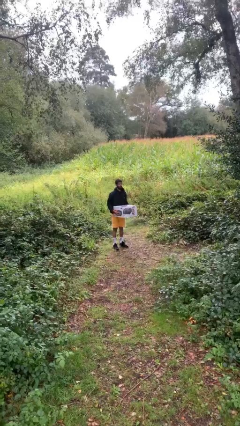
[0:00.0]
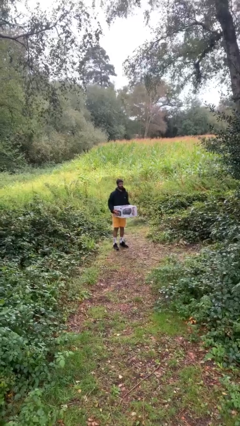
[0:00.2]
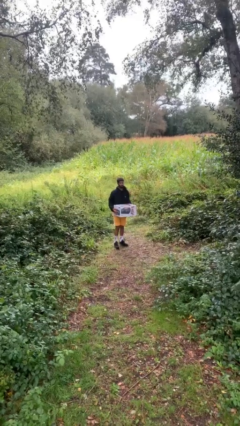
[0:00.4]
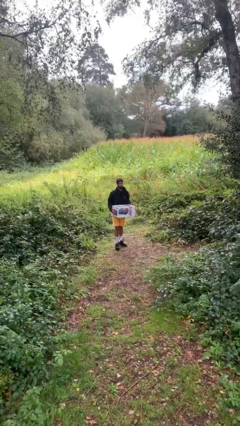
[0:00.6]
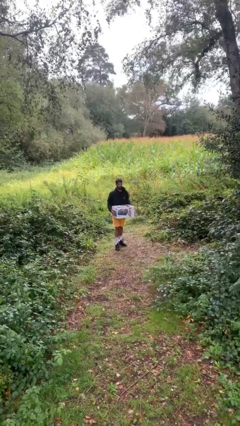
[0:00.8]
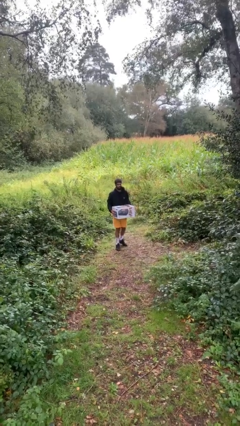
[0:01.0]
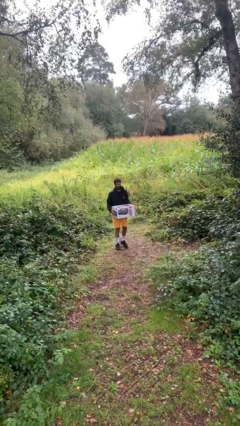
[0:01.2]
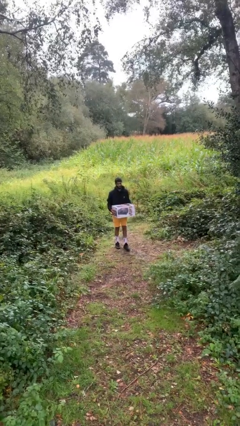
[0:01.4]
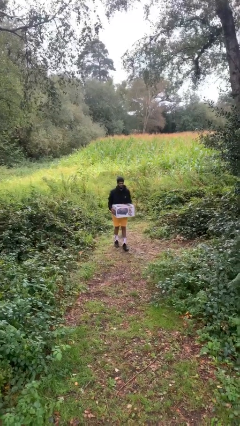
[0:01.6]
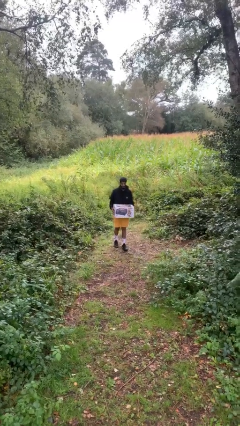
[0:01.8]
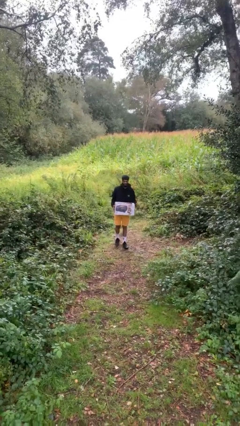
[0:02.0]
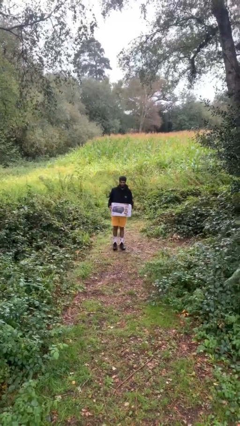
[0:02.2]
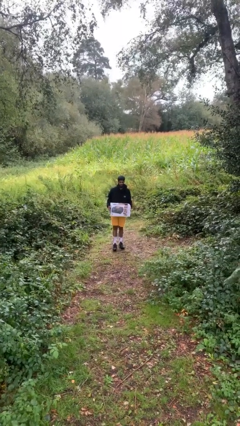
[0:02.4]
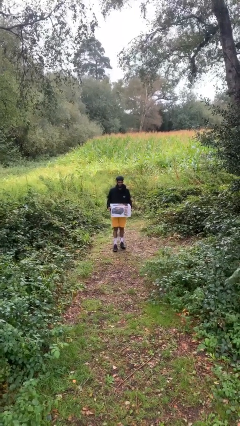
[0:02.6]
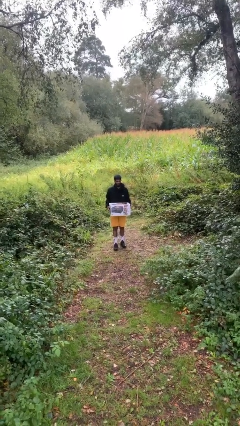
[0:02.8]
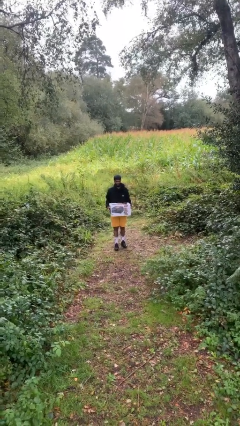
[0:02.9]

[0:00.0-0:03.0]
person carries heavy object

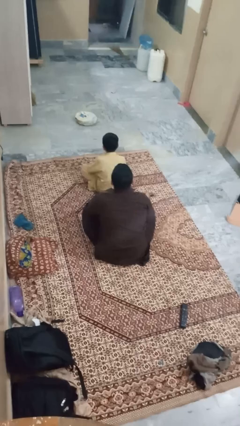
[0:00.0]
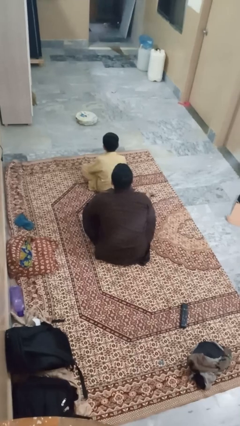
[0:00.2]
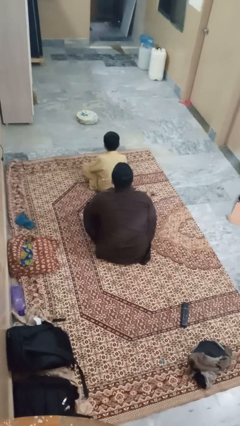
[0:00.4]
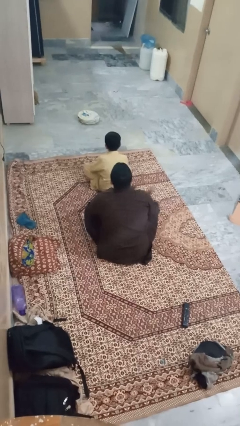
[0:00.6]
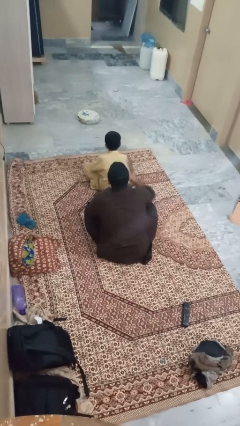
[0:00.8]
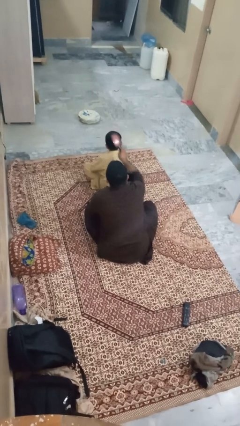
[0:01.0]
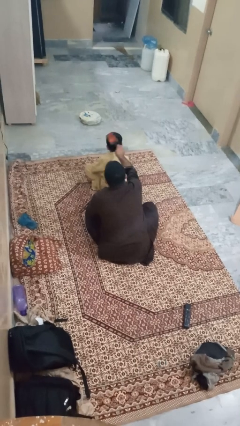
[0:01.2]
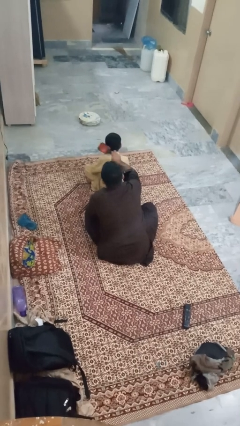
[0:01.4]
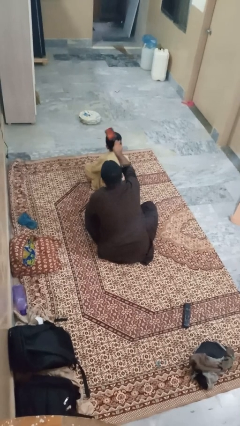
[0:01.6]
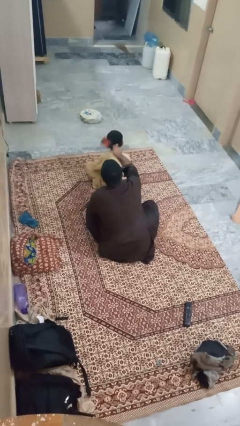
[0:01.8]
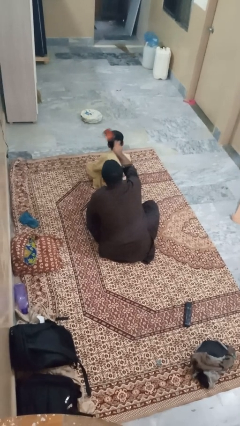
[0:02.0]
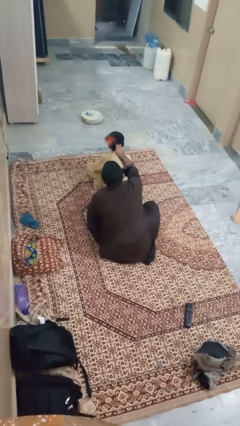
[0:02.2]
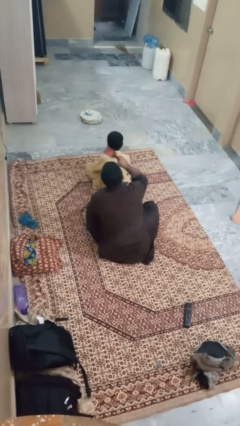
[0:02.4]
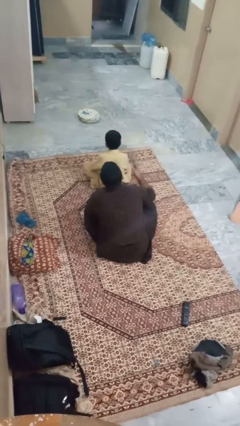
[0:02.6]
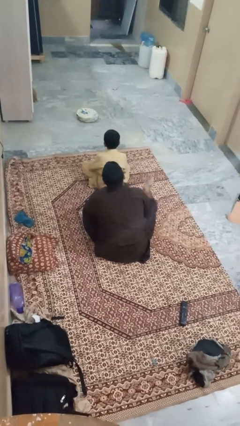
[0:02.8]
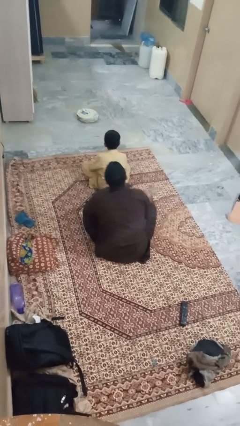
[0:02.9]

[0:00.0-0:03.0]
person brushes hair of person

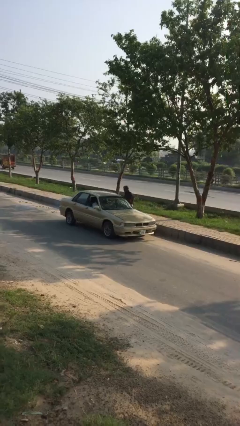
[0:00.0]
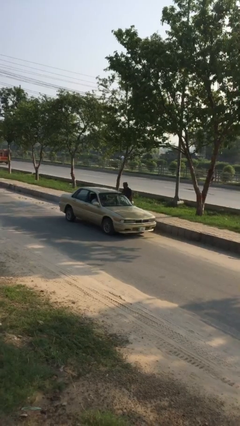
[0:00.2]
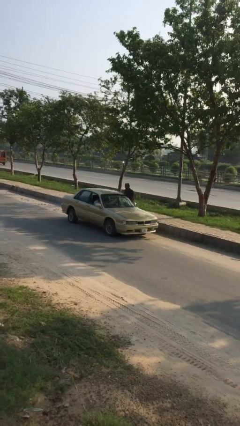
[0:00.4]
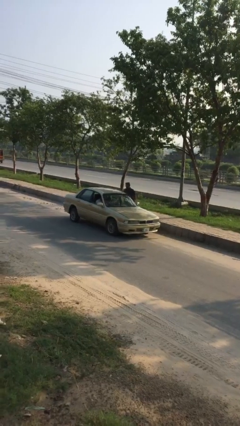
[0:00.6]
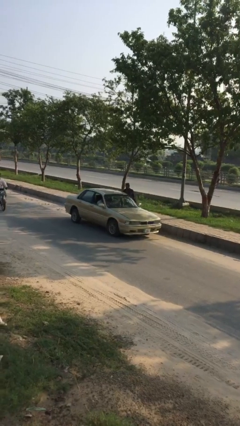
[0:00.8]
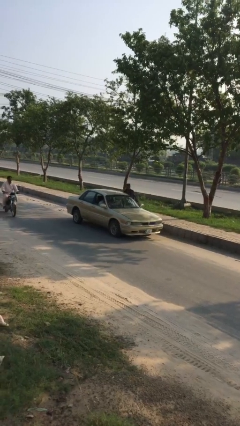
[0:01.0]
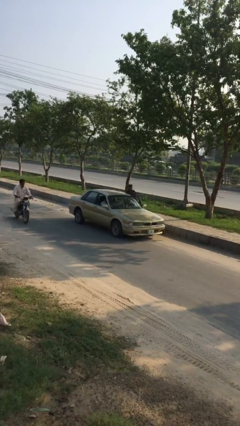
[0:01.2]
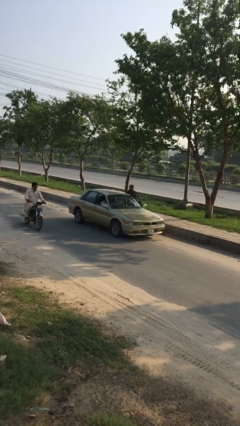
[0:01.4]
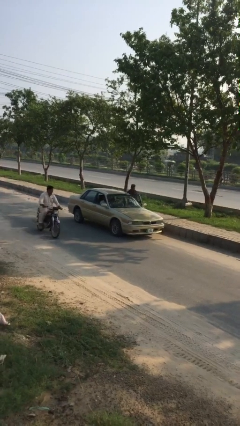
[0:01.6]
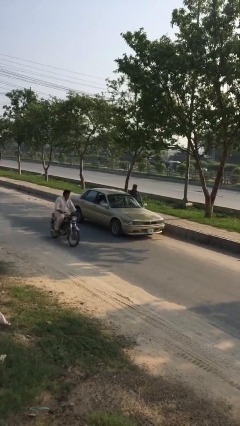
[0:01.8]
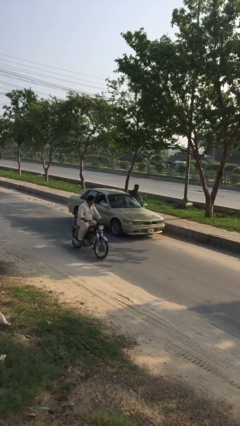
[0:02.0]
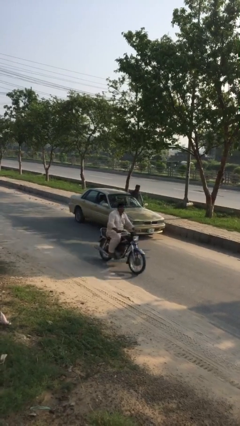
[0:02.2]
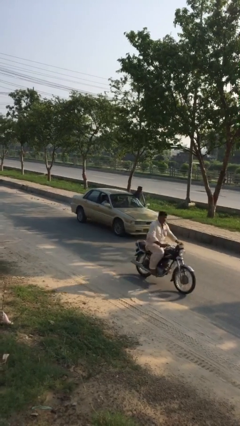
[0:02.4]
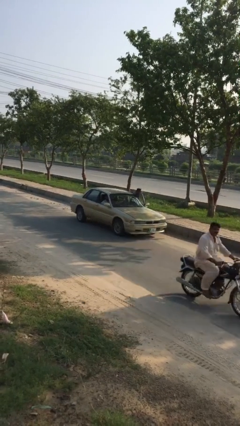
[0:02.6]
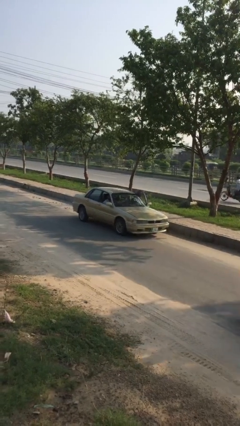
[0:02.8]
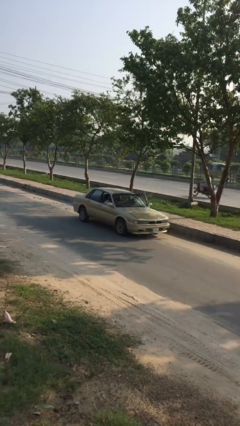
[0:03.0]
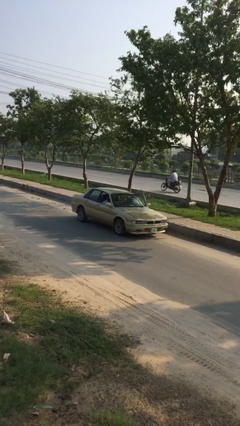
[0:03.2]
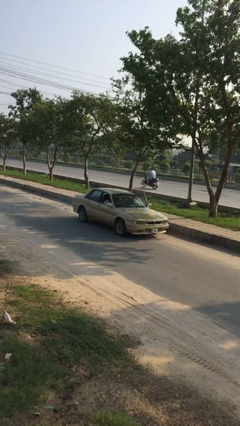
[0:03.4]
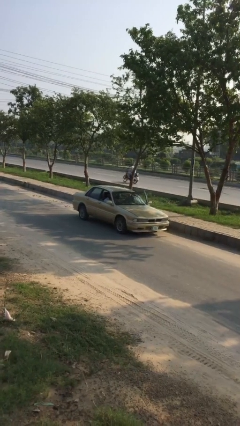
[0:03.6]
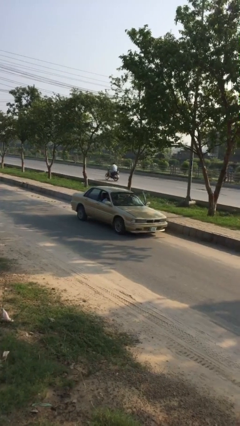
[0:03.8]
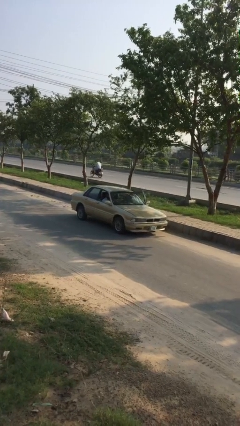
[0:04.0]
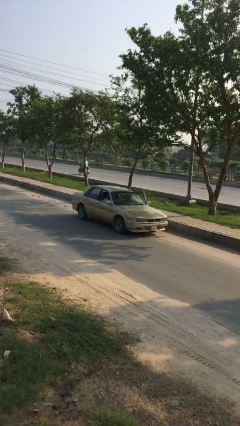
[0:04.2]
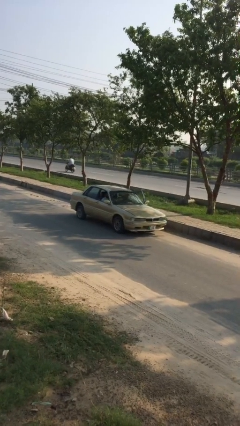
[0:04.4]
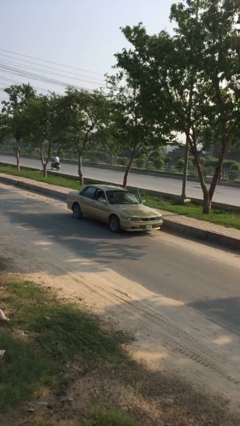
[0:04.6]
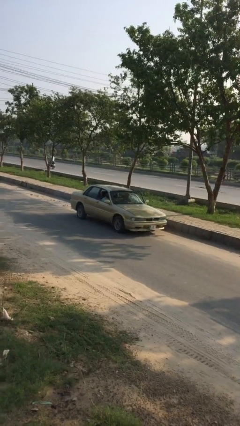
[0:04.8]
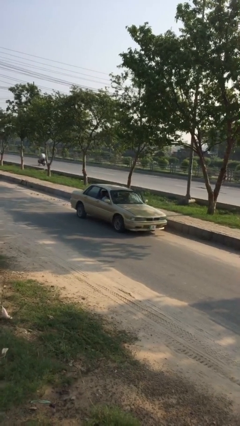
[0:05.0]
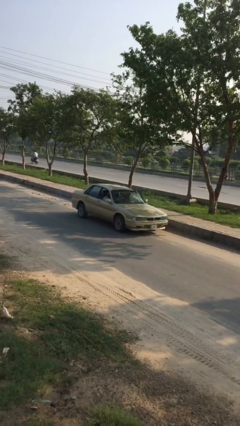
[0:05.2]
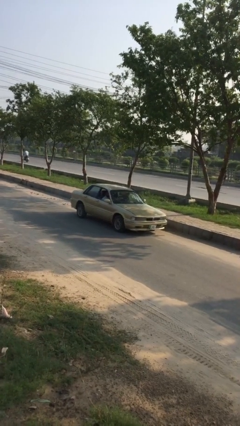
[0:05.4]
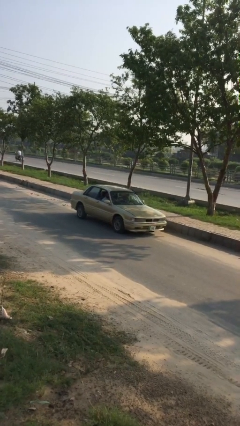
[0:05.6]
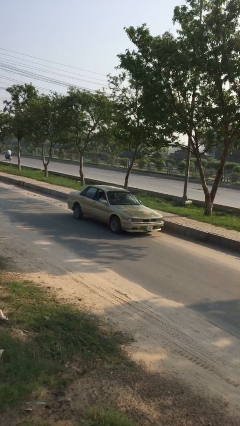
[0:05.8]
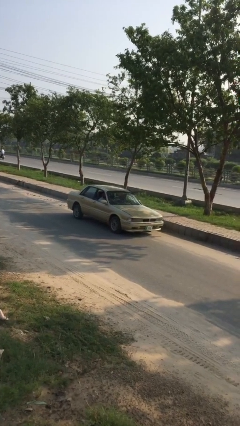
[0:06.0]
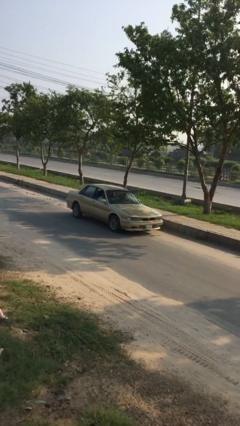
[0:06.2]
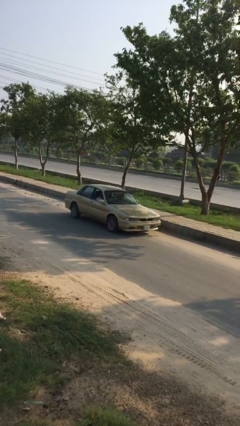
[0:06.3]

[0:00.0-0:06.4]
car picks up person

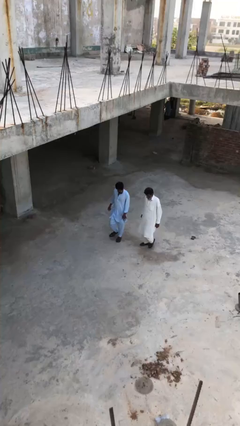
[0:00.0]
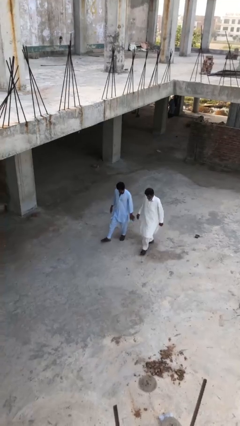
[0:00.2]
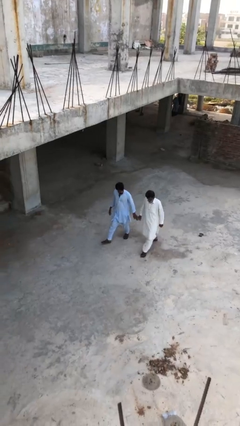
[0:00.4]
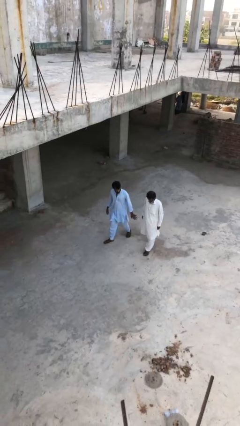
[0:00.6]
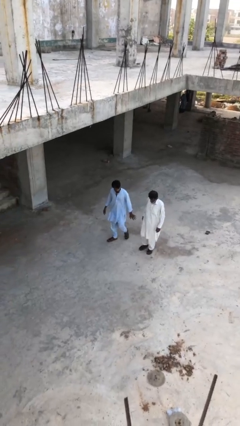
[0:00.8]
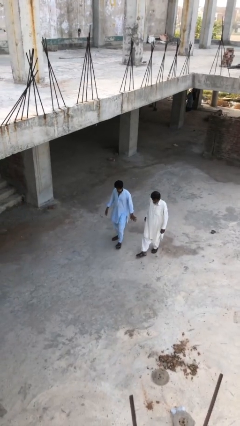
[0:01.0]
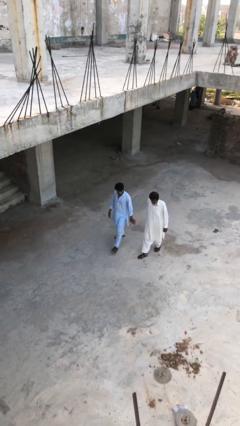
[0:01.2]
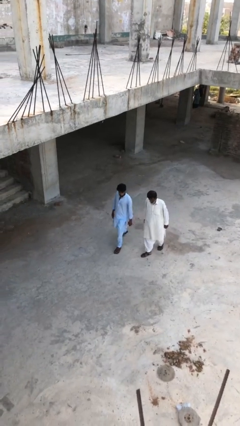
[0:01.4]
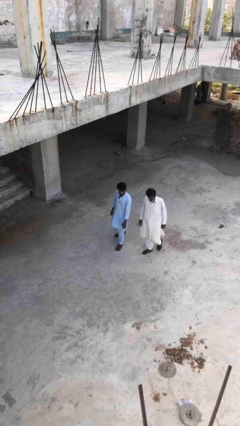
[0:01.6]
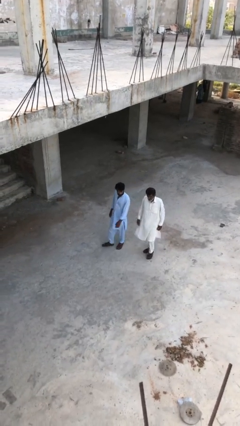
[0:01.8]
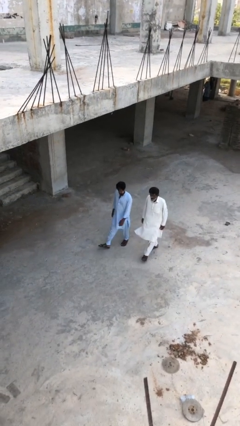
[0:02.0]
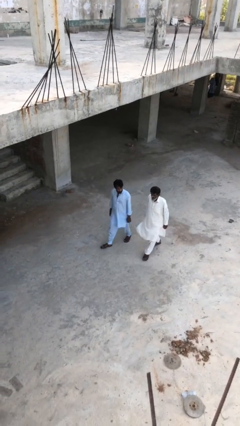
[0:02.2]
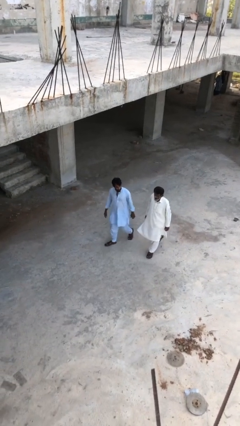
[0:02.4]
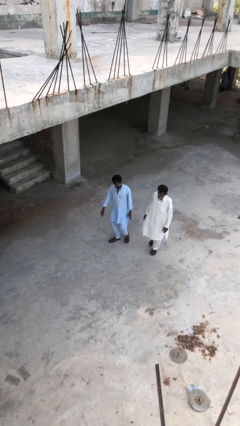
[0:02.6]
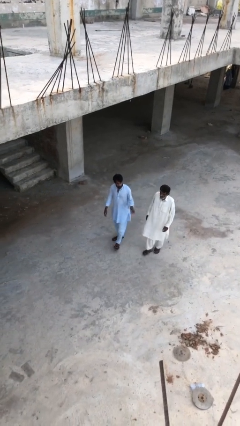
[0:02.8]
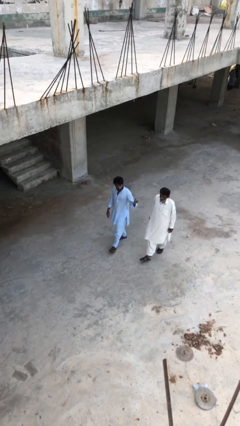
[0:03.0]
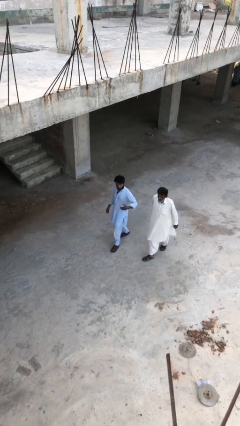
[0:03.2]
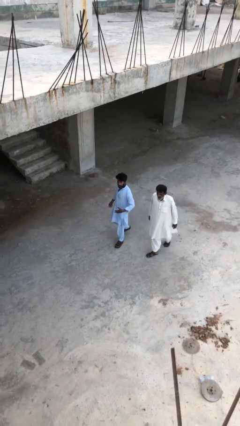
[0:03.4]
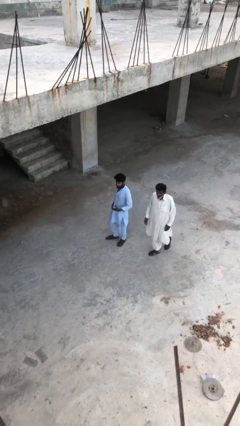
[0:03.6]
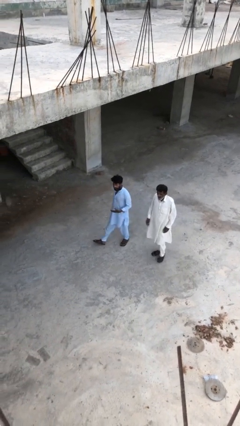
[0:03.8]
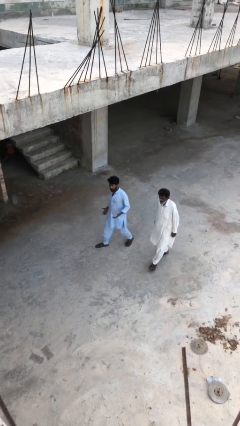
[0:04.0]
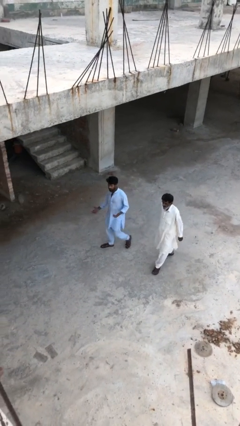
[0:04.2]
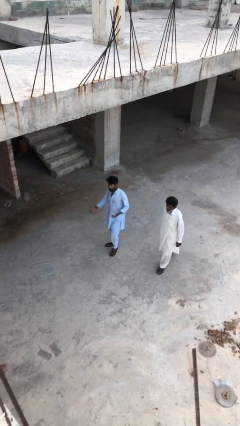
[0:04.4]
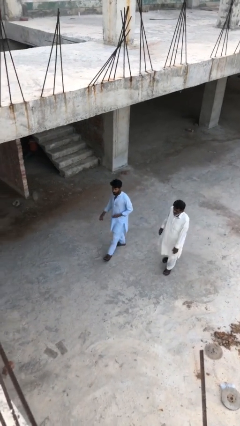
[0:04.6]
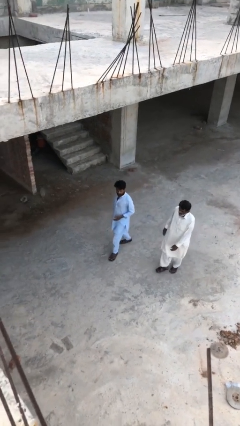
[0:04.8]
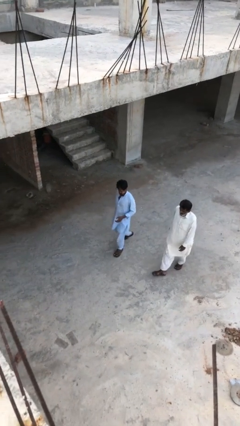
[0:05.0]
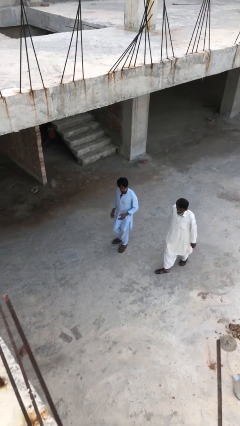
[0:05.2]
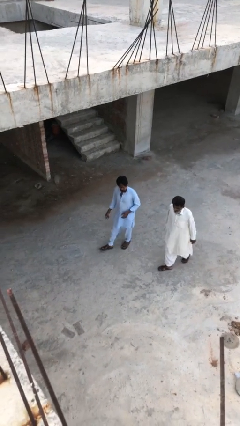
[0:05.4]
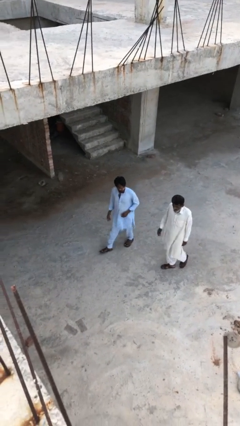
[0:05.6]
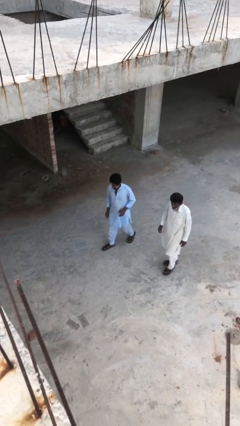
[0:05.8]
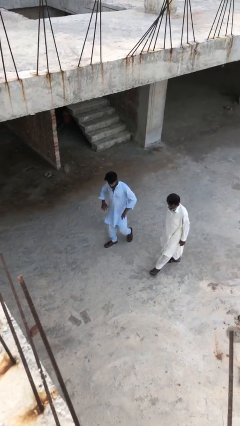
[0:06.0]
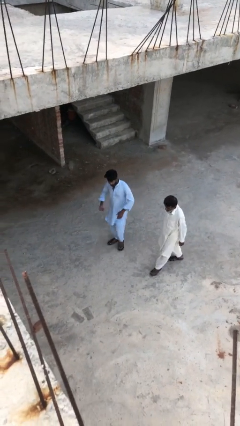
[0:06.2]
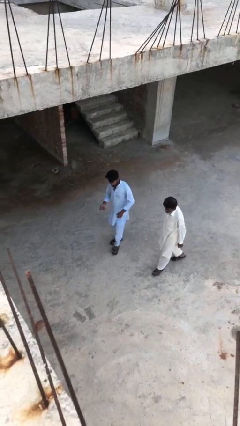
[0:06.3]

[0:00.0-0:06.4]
person talks to person
